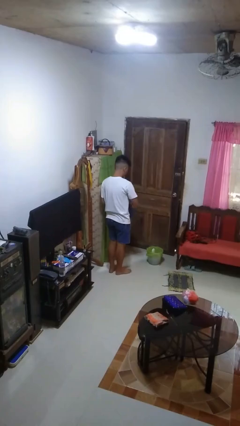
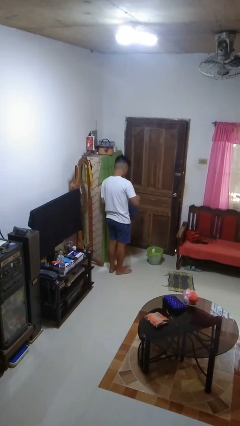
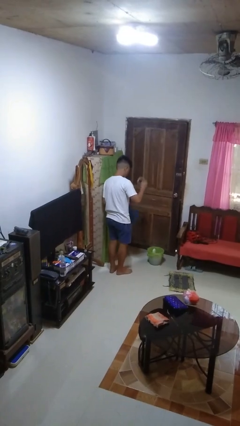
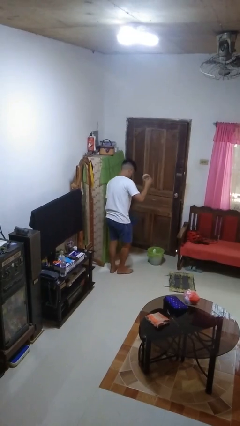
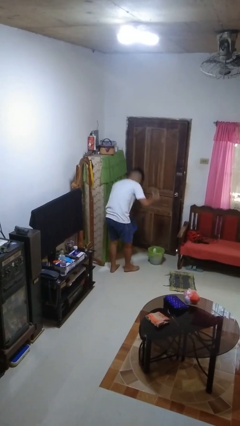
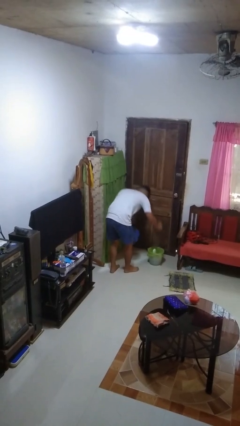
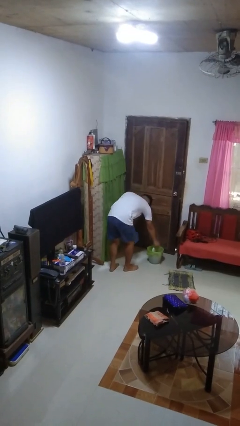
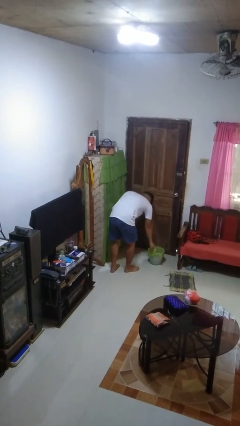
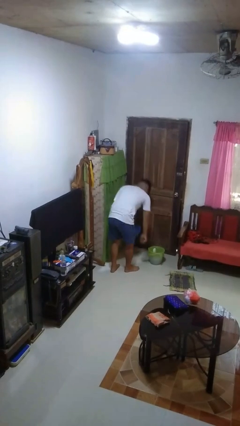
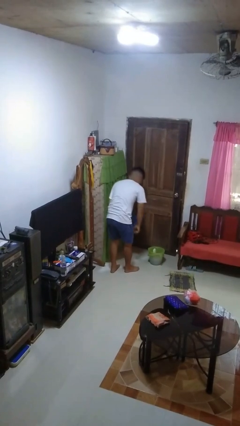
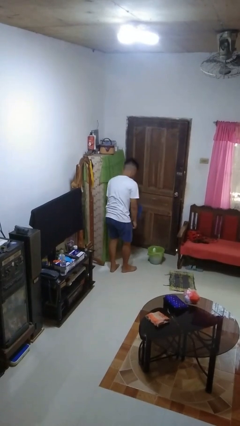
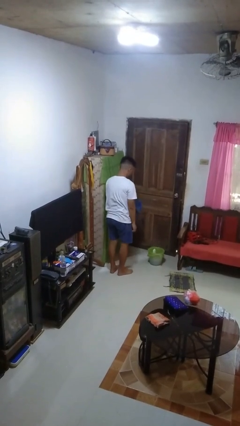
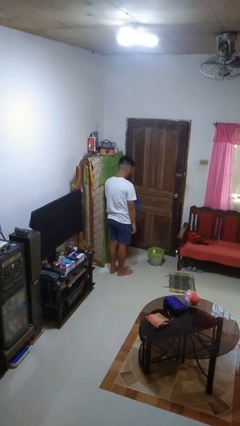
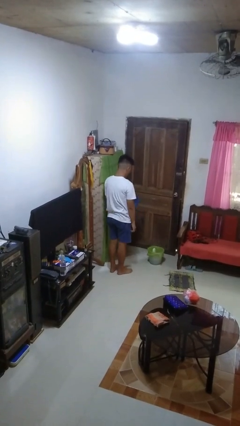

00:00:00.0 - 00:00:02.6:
person discards trash

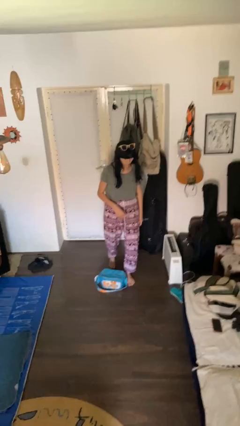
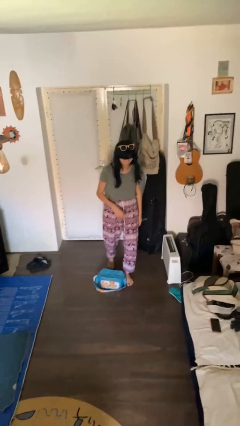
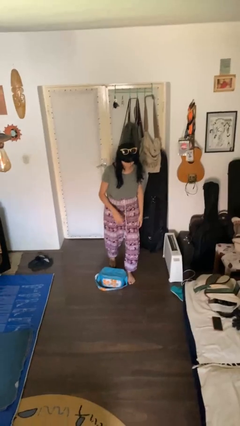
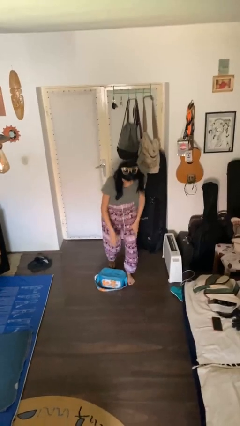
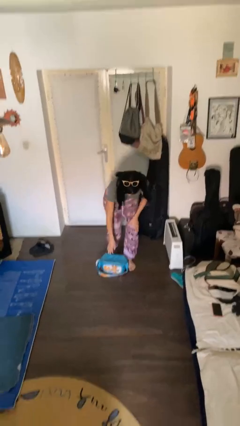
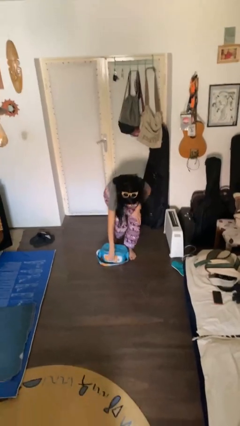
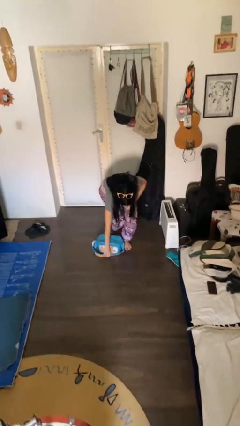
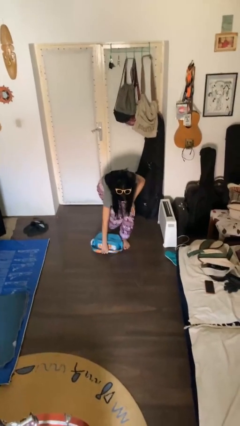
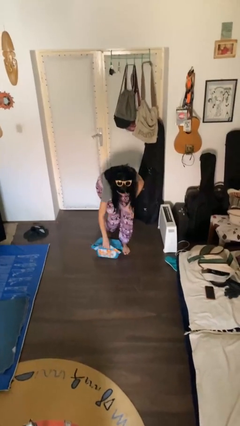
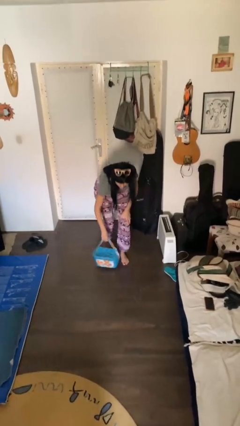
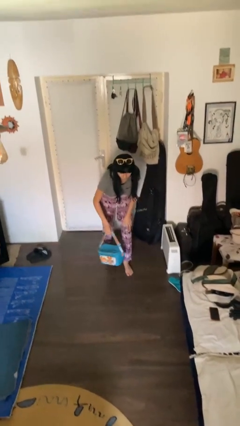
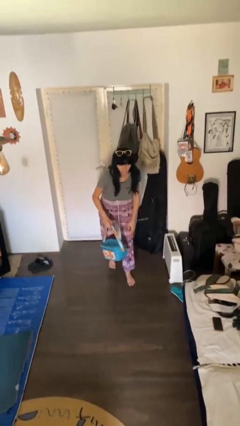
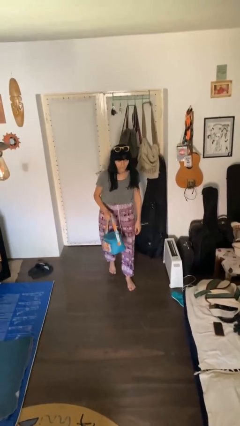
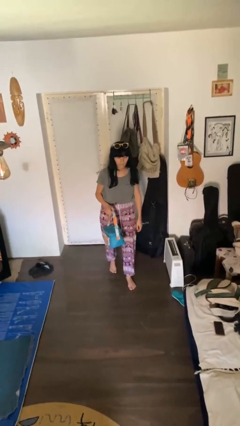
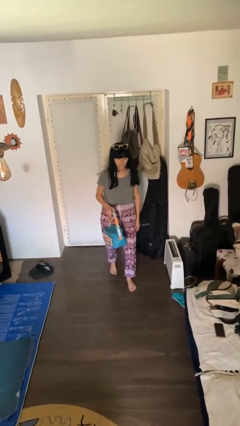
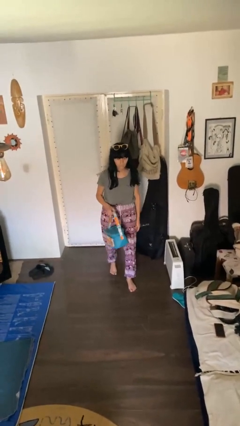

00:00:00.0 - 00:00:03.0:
person picks up object from floor

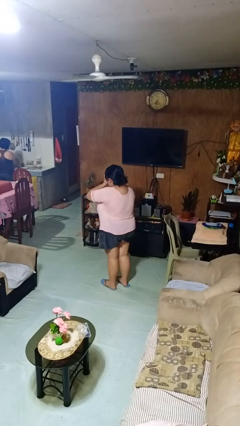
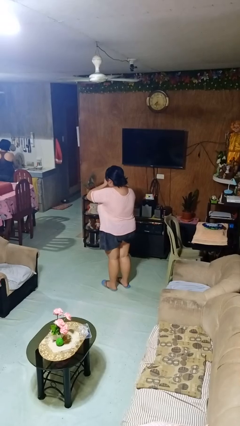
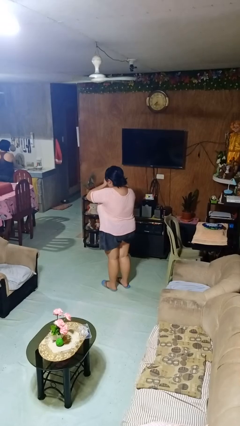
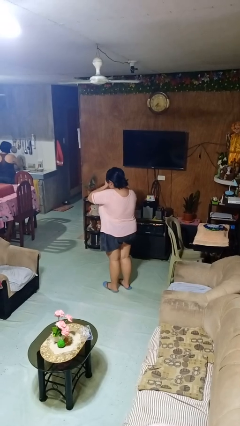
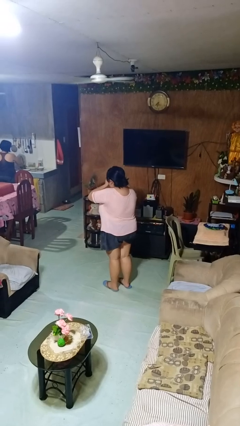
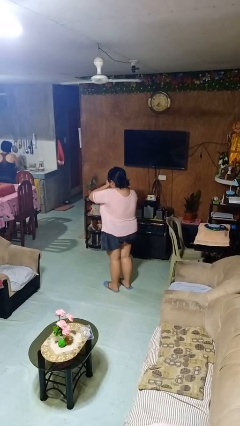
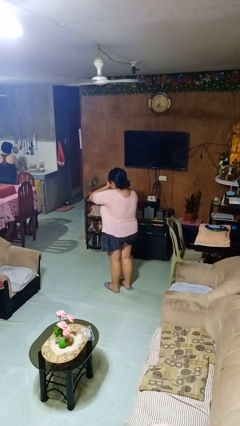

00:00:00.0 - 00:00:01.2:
person yawns

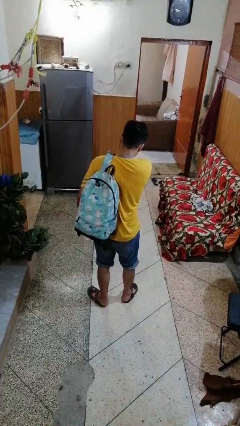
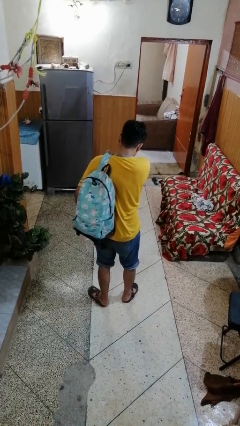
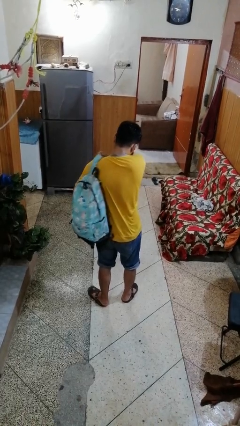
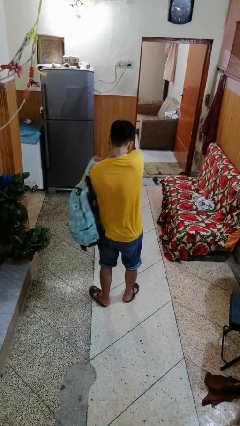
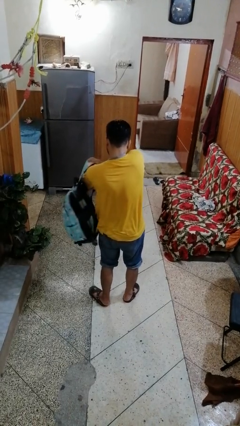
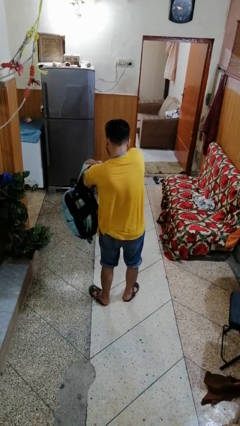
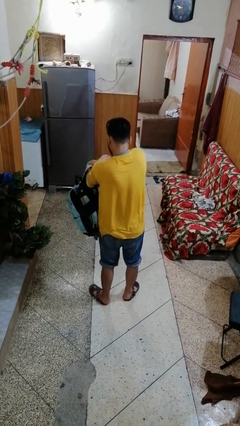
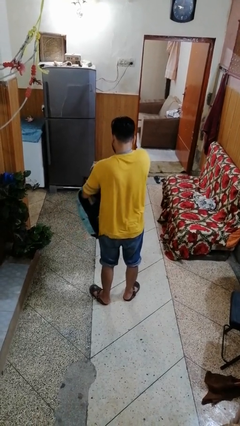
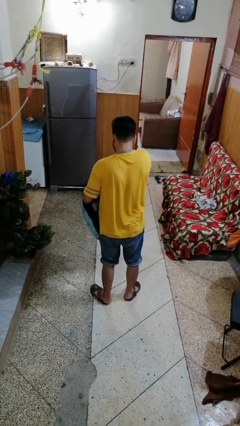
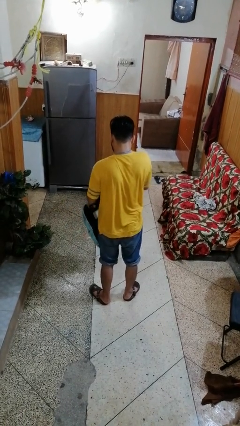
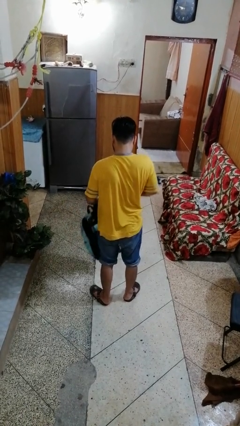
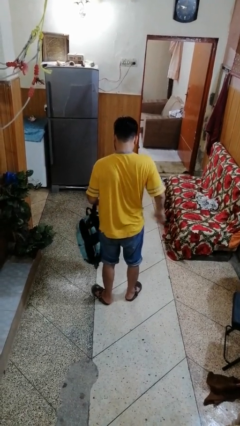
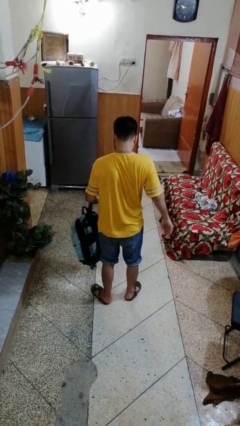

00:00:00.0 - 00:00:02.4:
person takes off backpack

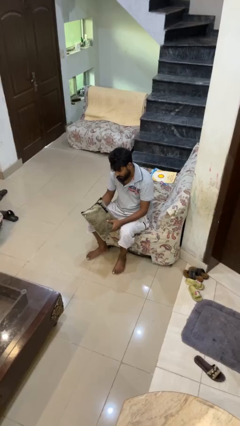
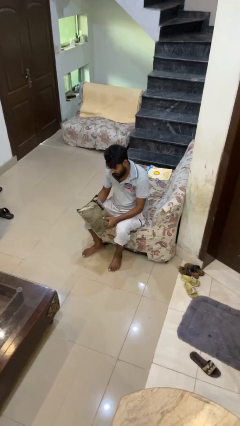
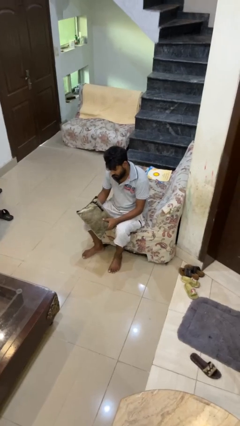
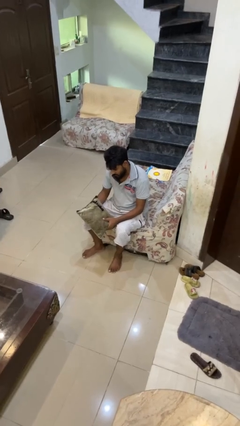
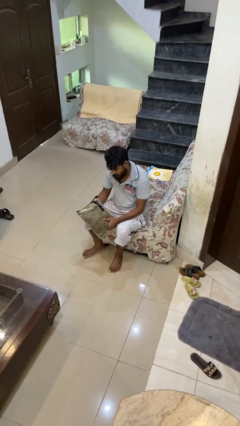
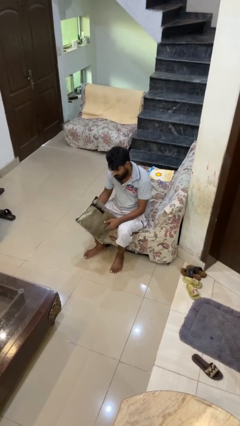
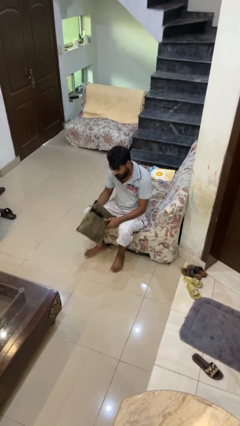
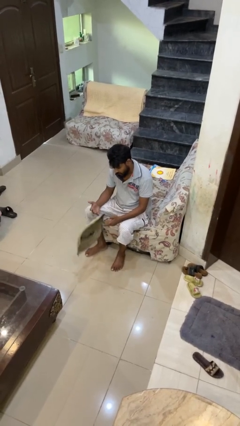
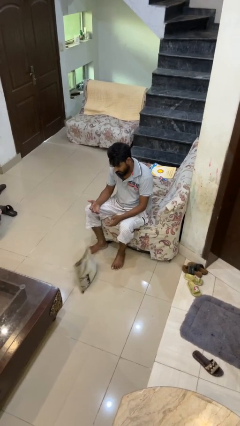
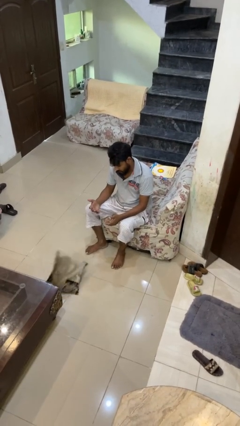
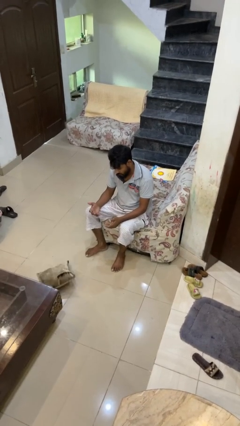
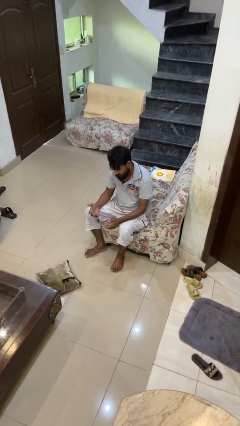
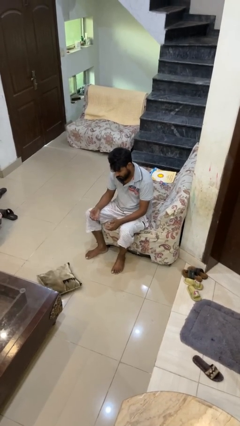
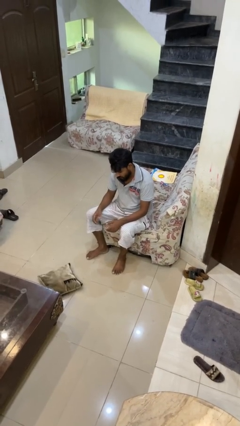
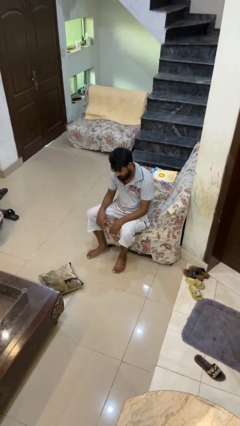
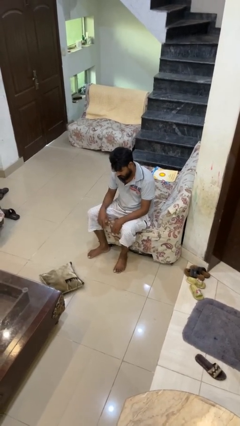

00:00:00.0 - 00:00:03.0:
person drops object

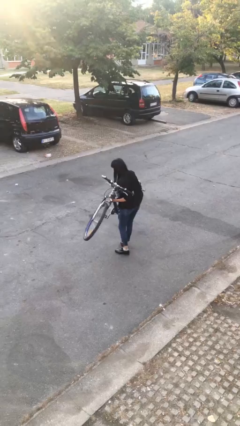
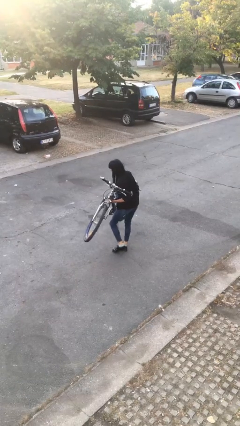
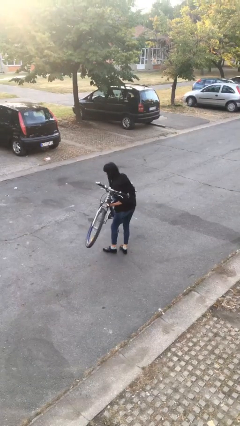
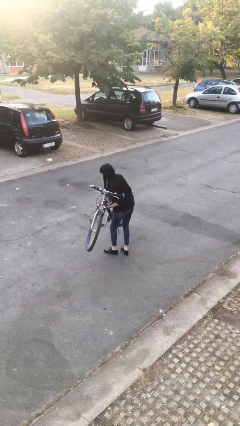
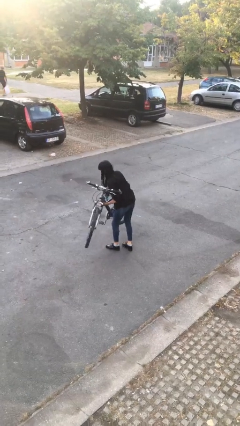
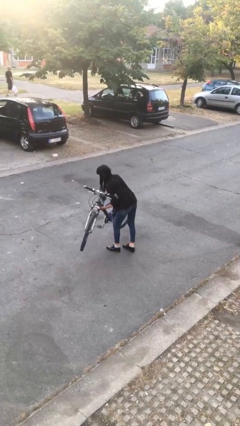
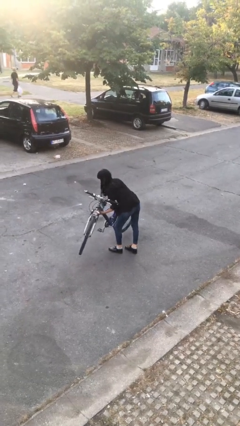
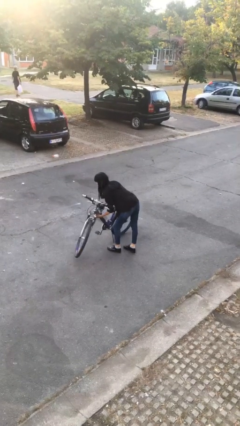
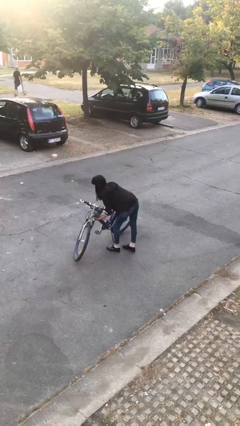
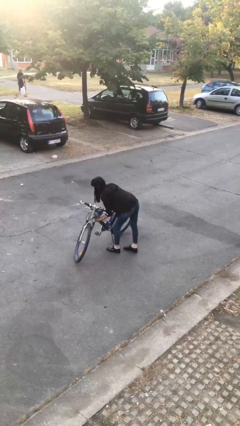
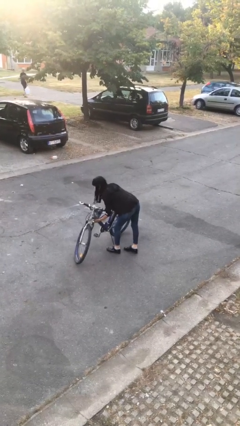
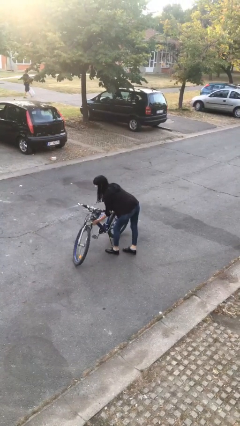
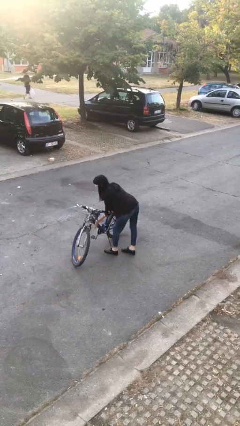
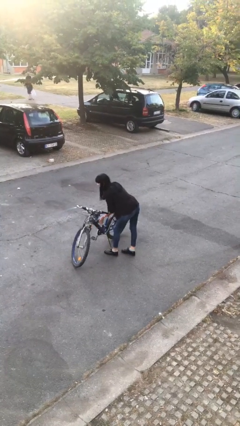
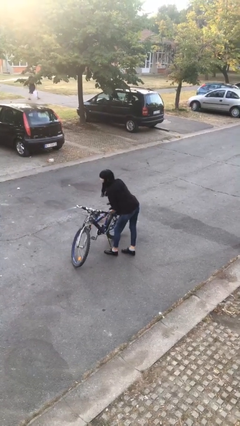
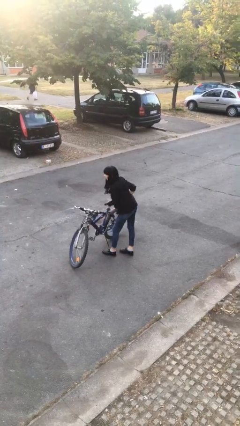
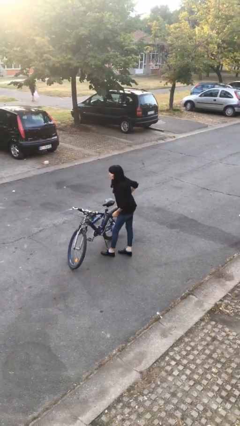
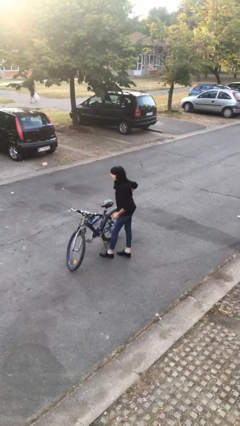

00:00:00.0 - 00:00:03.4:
person puts down object on floor

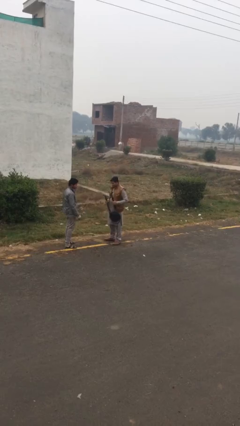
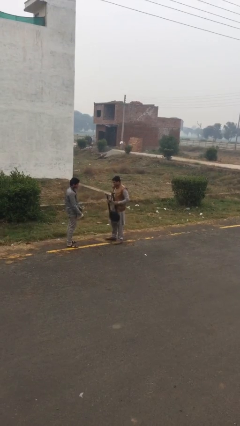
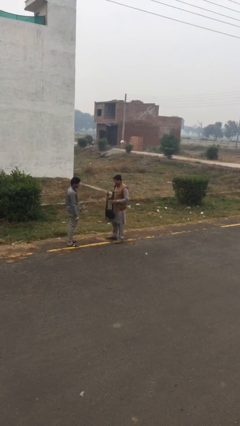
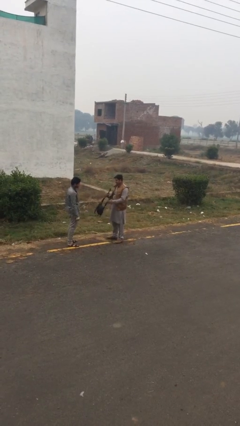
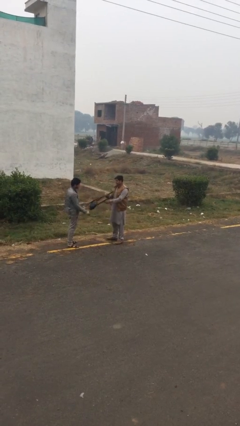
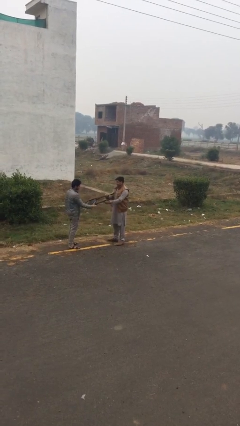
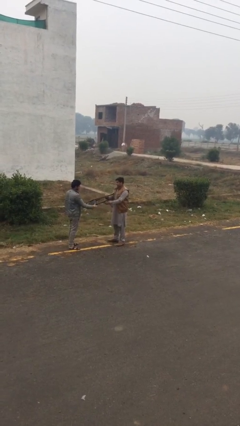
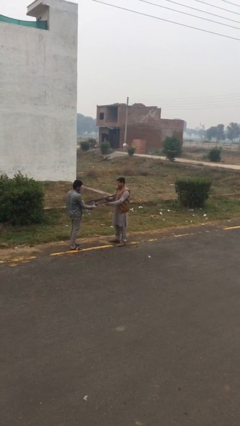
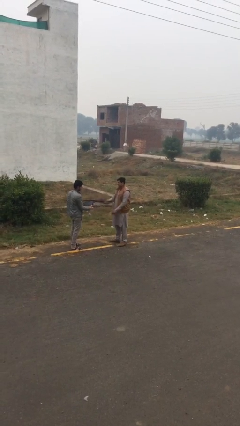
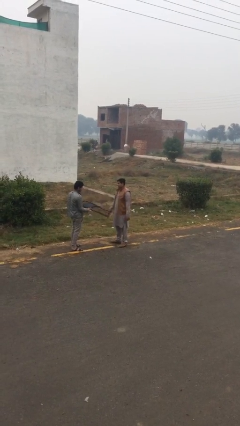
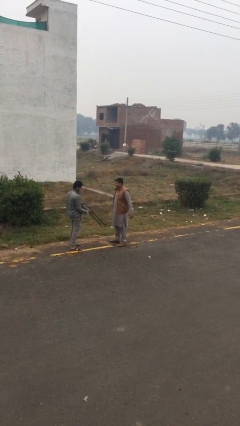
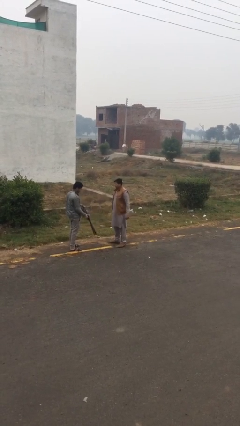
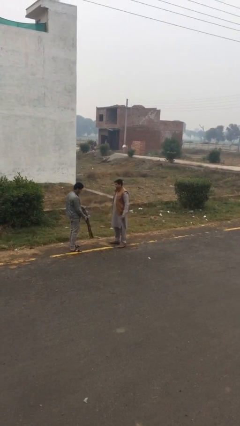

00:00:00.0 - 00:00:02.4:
person transfers object to person
